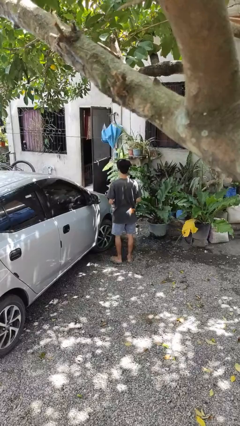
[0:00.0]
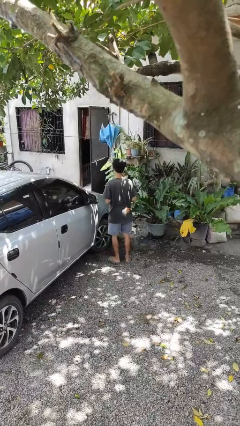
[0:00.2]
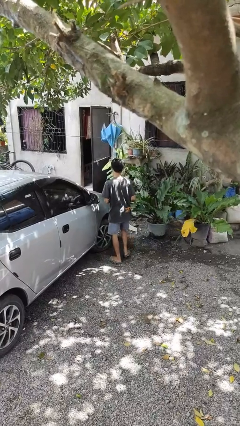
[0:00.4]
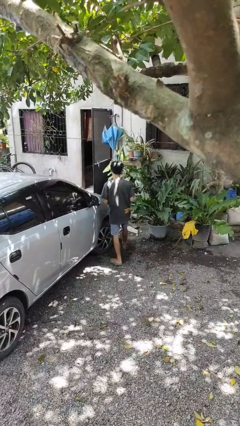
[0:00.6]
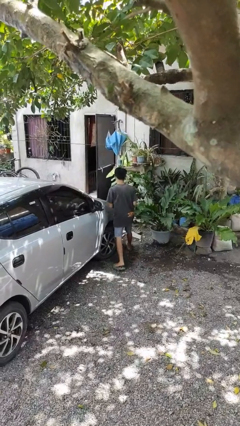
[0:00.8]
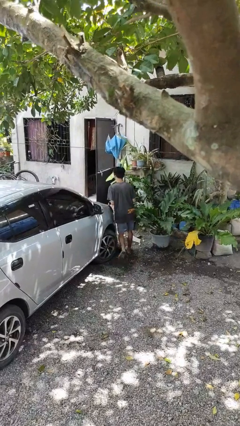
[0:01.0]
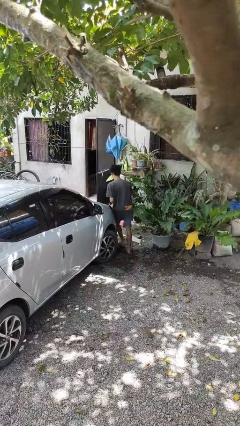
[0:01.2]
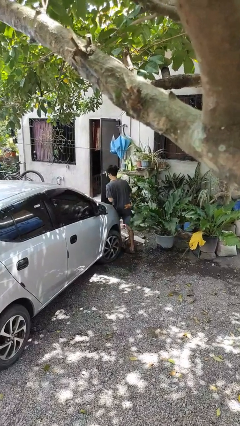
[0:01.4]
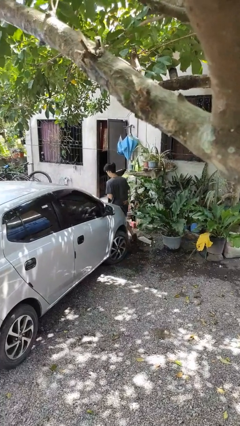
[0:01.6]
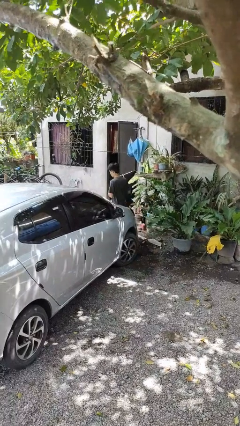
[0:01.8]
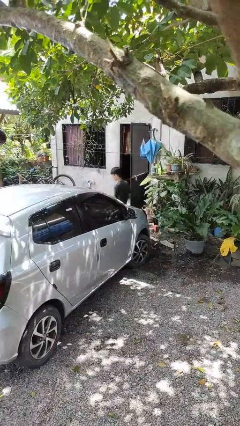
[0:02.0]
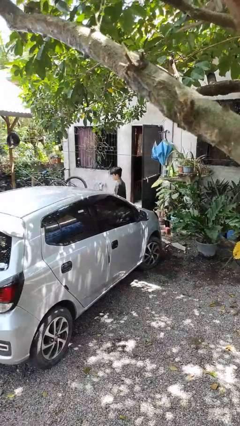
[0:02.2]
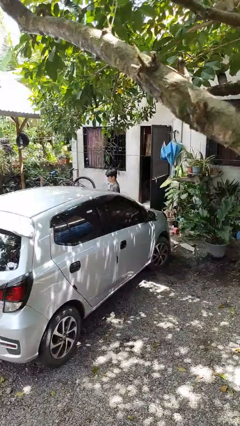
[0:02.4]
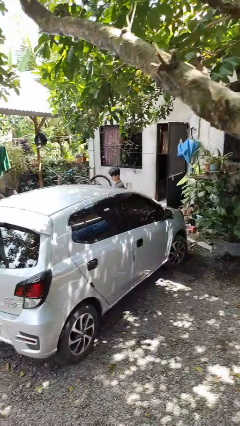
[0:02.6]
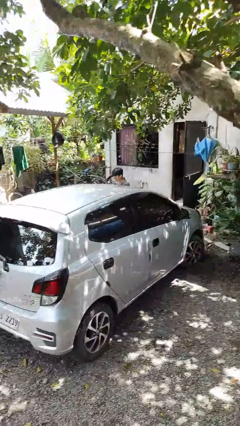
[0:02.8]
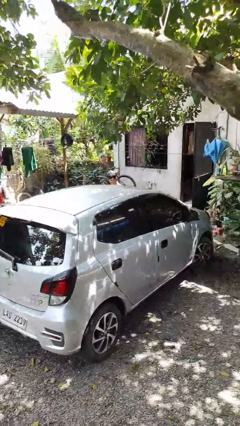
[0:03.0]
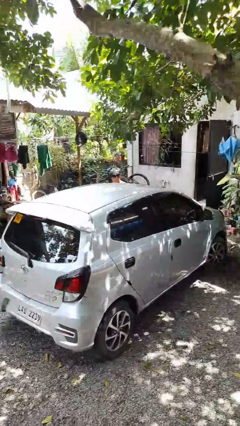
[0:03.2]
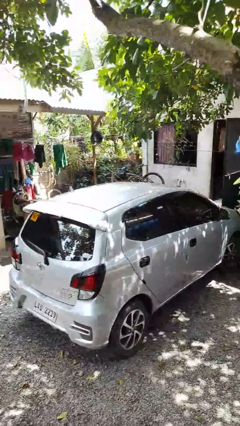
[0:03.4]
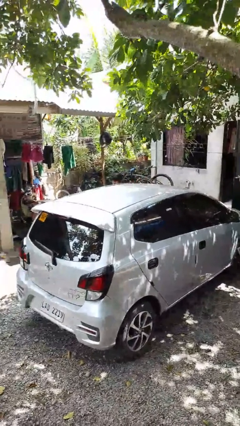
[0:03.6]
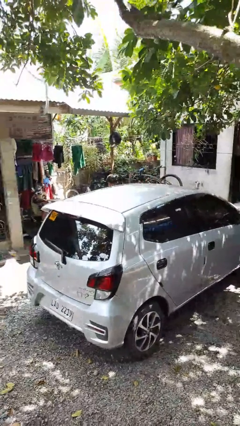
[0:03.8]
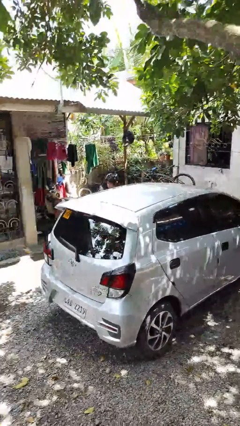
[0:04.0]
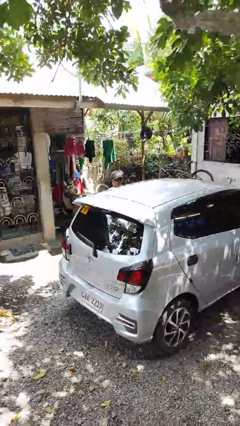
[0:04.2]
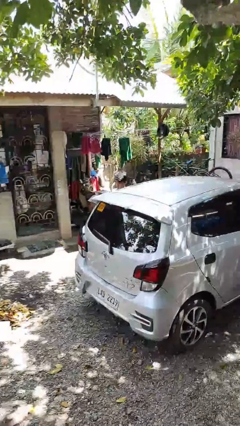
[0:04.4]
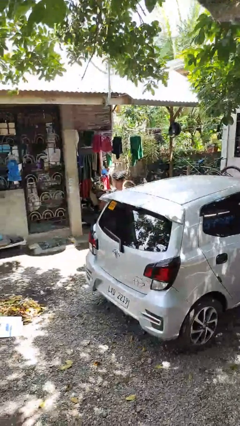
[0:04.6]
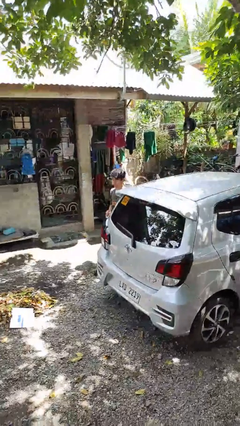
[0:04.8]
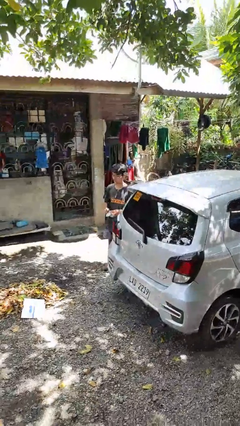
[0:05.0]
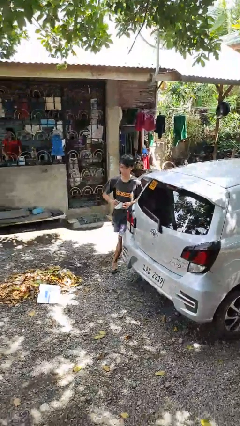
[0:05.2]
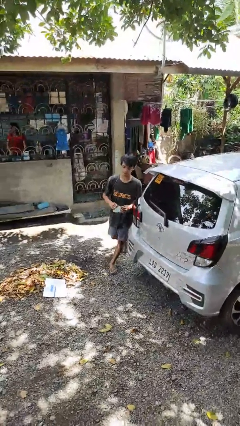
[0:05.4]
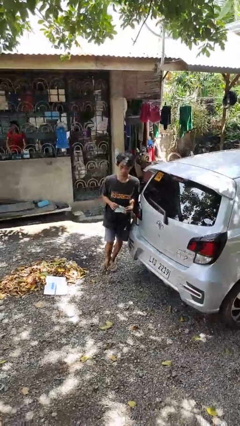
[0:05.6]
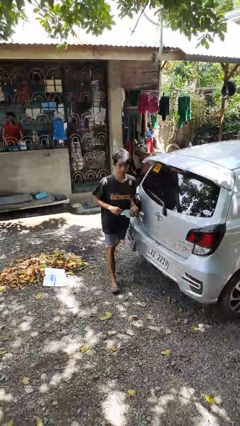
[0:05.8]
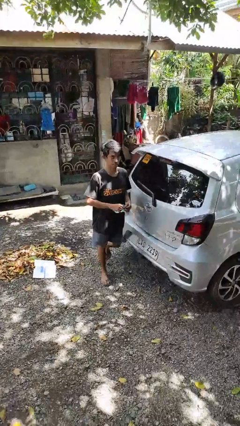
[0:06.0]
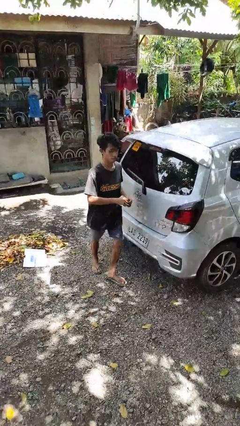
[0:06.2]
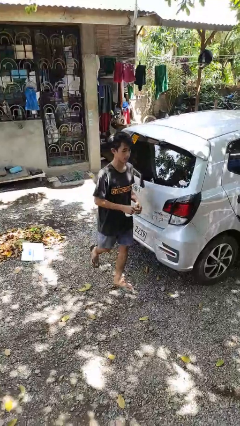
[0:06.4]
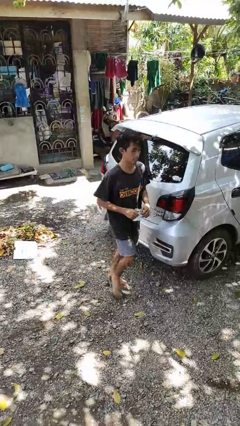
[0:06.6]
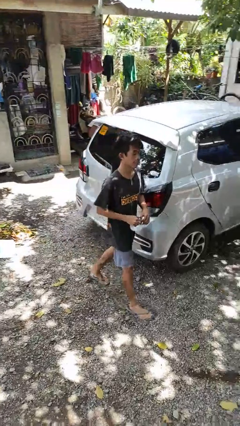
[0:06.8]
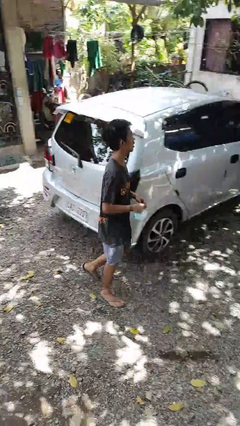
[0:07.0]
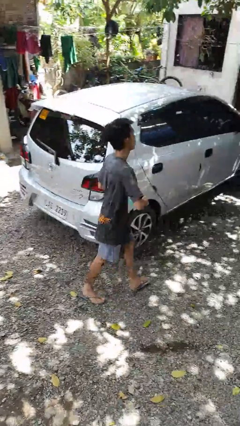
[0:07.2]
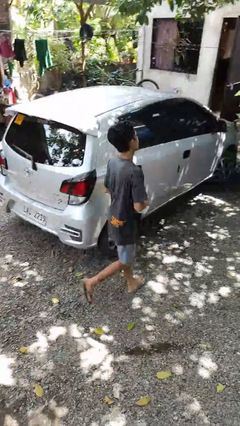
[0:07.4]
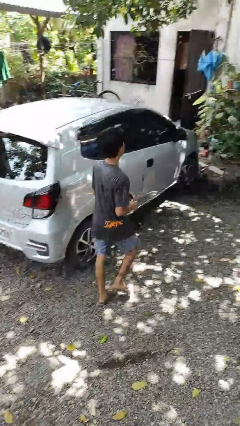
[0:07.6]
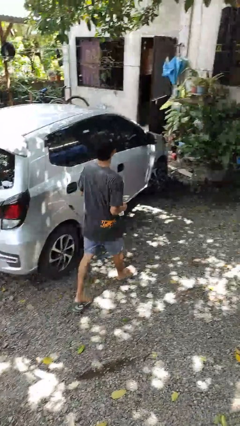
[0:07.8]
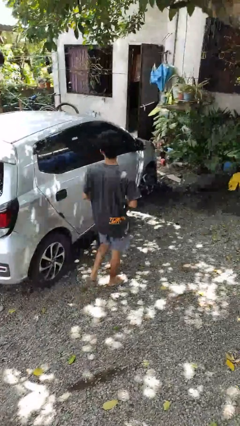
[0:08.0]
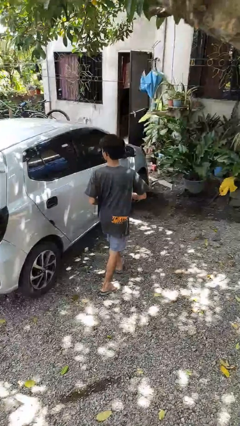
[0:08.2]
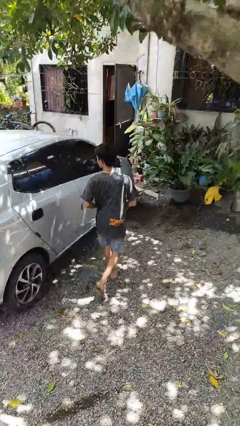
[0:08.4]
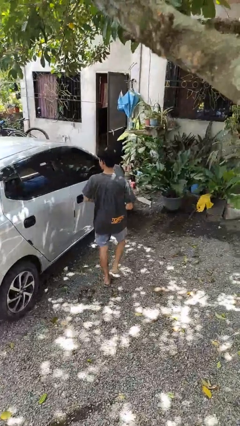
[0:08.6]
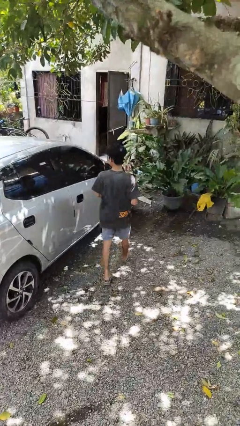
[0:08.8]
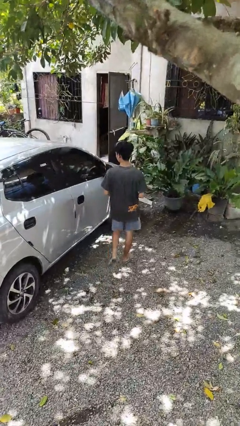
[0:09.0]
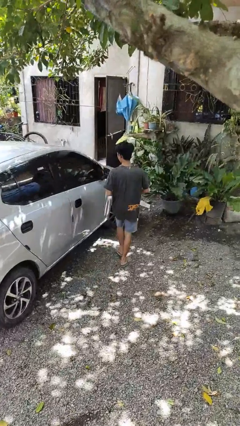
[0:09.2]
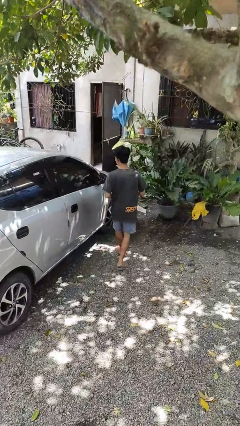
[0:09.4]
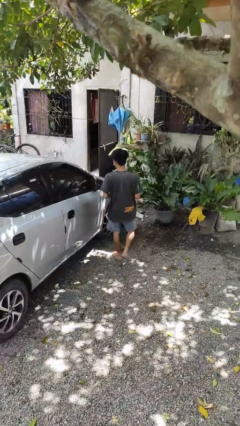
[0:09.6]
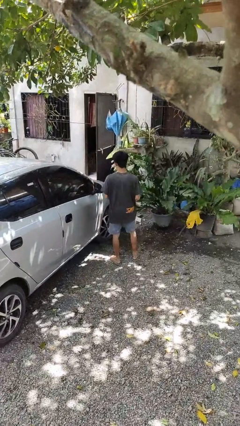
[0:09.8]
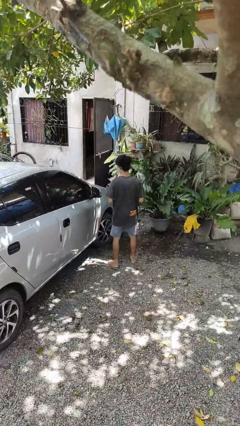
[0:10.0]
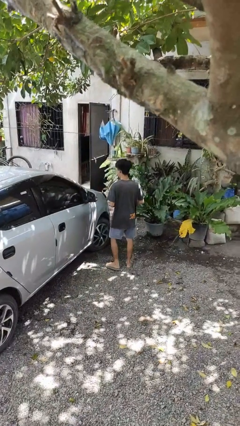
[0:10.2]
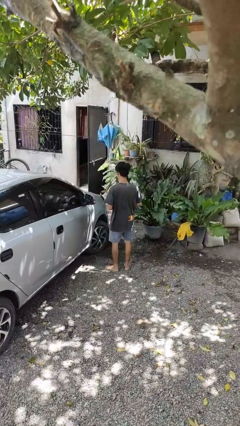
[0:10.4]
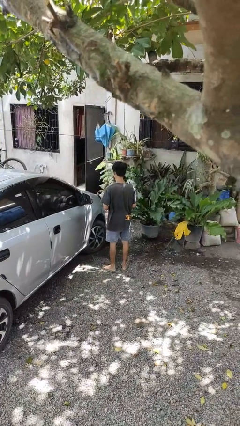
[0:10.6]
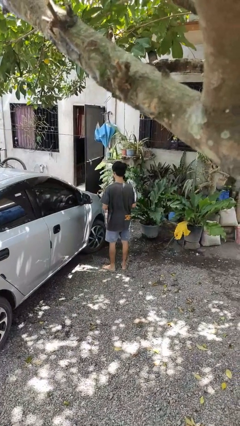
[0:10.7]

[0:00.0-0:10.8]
person walks around car

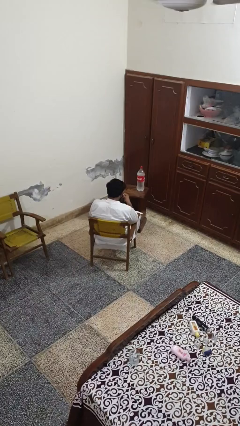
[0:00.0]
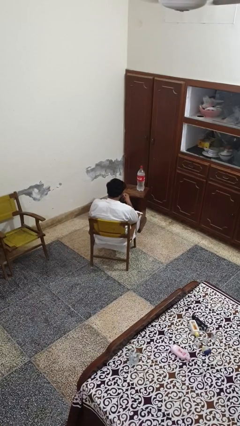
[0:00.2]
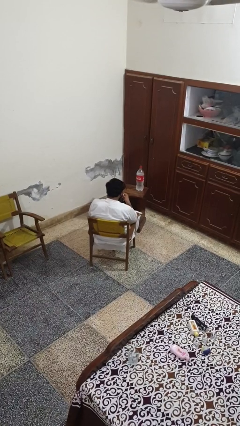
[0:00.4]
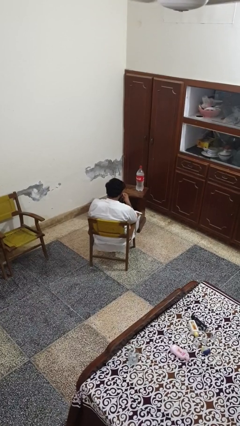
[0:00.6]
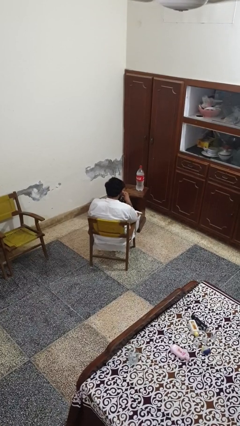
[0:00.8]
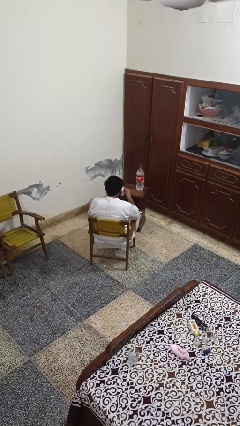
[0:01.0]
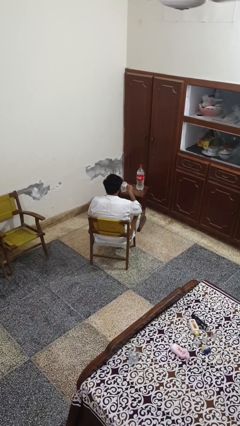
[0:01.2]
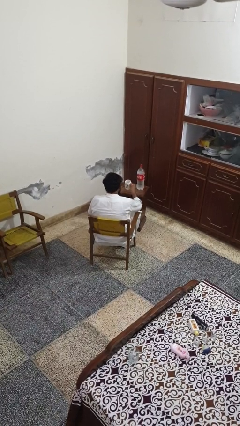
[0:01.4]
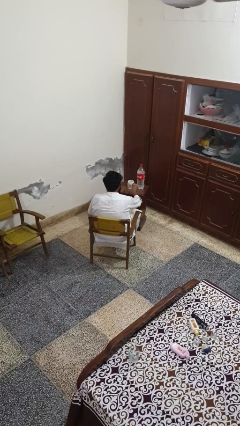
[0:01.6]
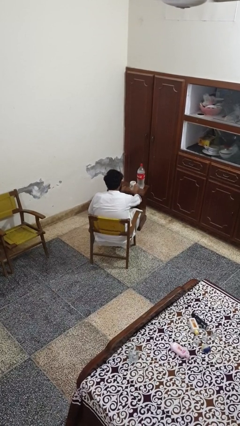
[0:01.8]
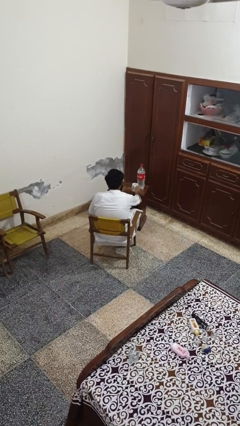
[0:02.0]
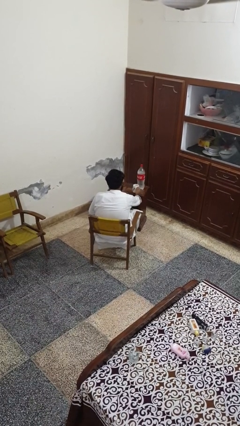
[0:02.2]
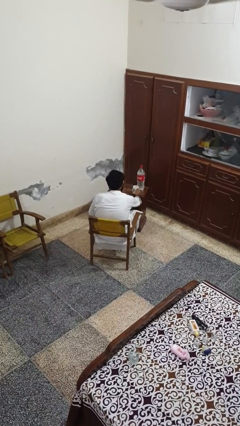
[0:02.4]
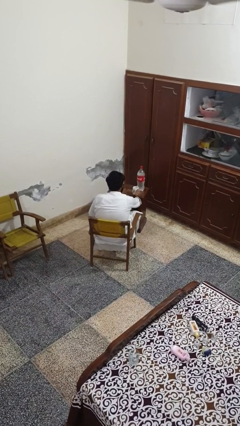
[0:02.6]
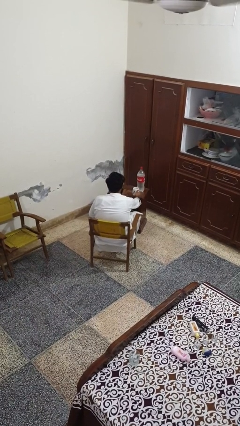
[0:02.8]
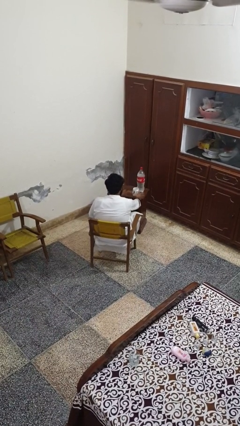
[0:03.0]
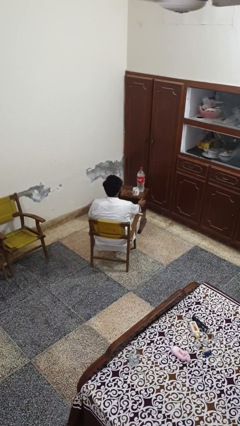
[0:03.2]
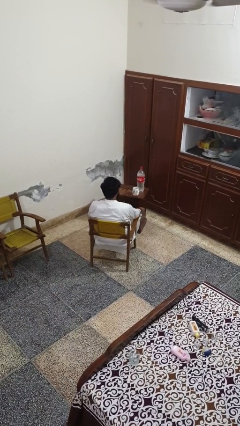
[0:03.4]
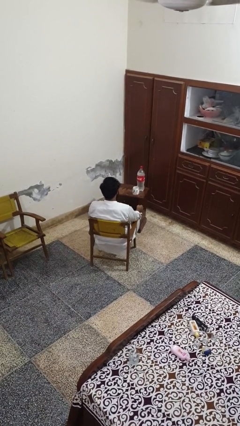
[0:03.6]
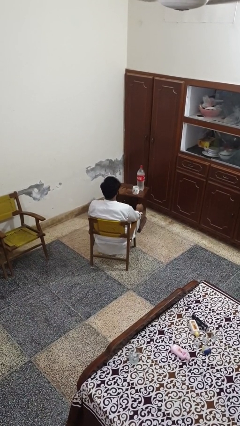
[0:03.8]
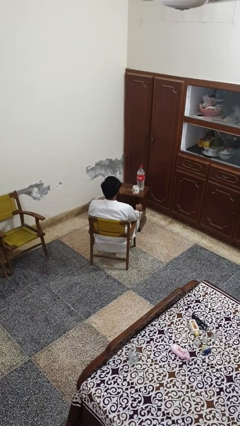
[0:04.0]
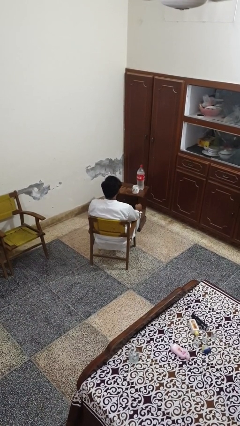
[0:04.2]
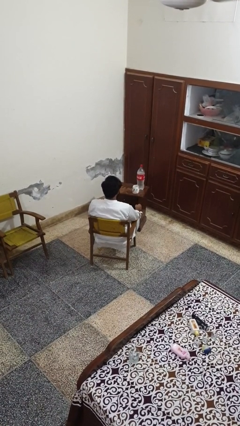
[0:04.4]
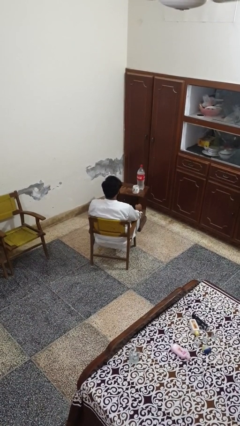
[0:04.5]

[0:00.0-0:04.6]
person puts down object on table

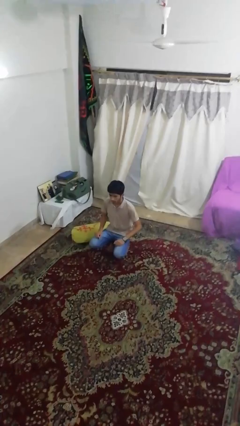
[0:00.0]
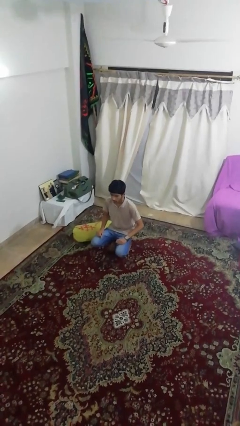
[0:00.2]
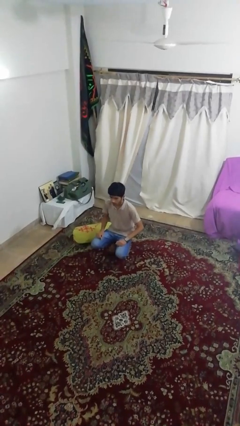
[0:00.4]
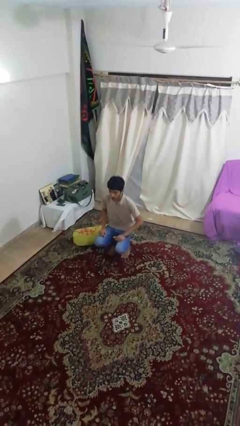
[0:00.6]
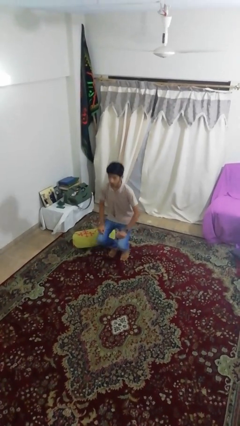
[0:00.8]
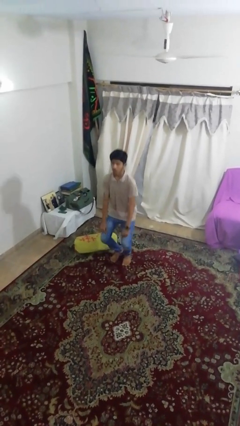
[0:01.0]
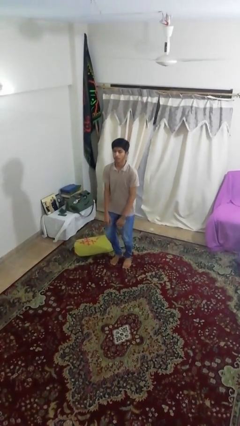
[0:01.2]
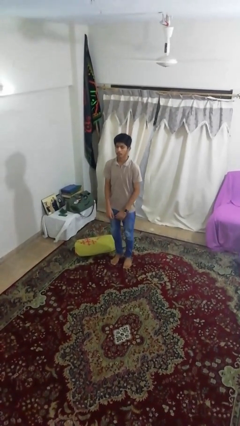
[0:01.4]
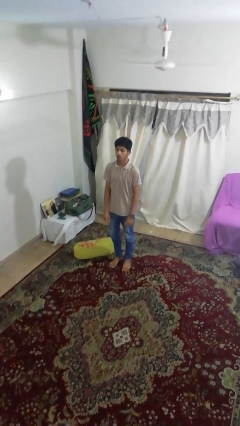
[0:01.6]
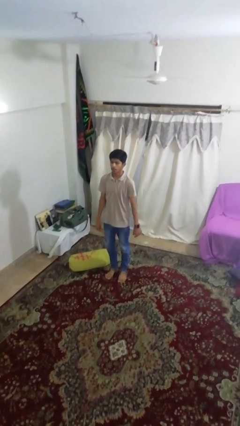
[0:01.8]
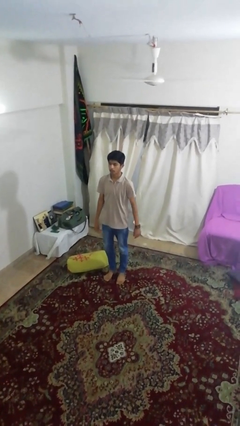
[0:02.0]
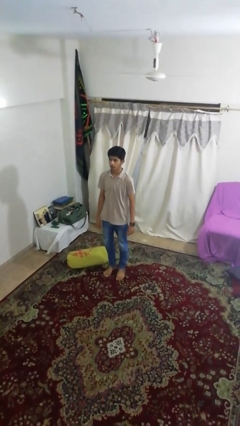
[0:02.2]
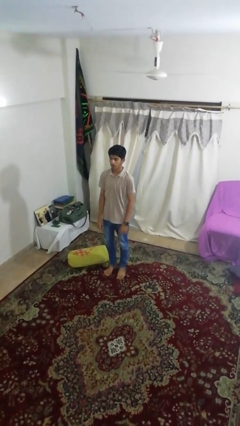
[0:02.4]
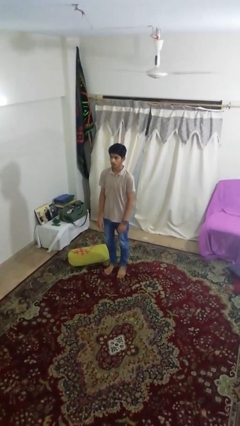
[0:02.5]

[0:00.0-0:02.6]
person stands up
